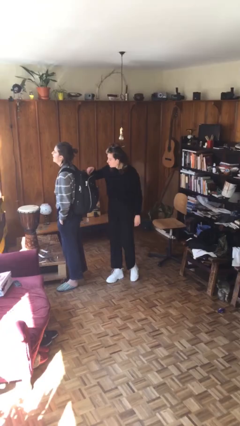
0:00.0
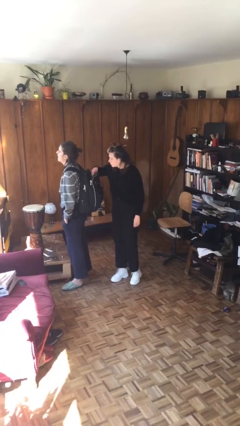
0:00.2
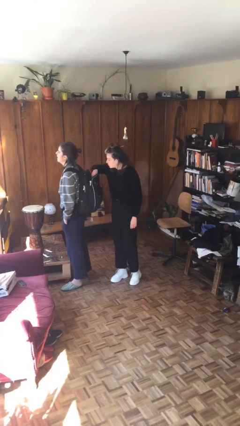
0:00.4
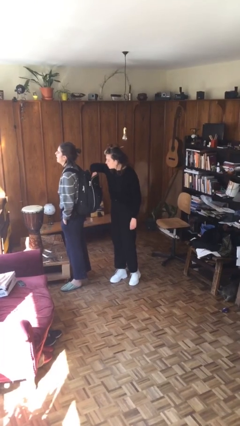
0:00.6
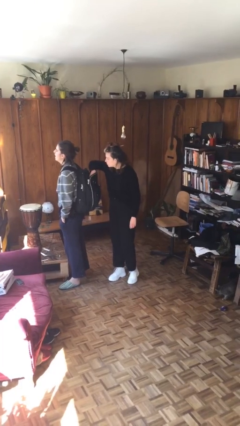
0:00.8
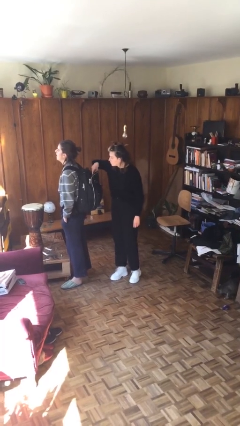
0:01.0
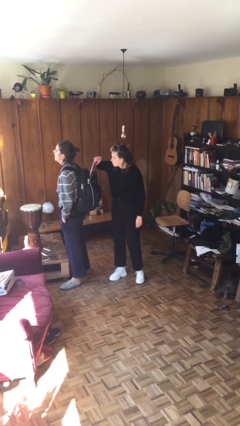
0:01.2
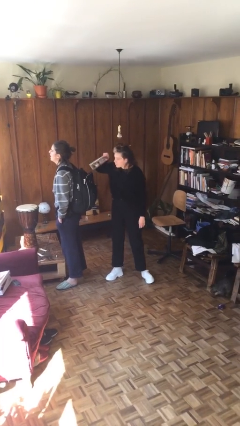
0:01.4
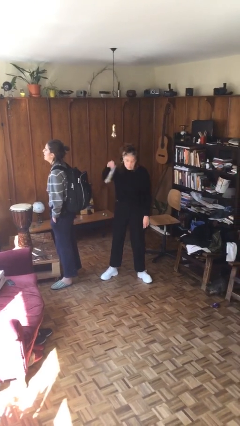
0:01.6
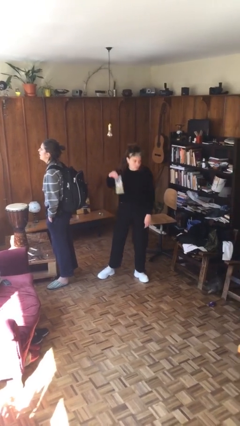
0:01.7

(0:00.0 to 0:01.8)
person steals object from person

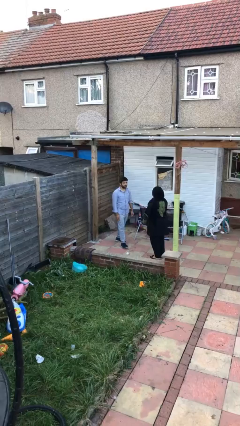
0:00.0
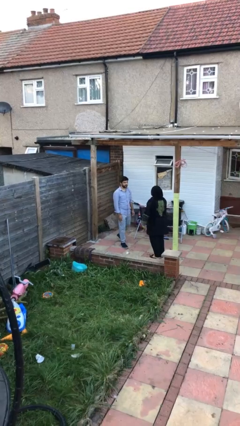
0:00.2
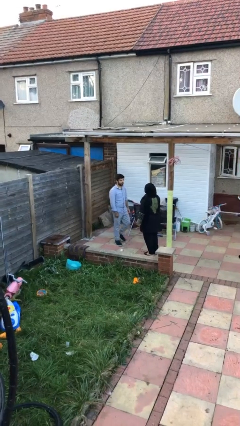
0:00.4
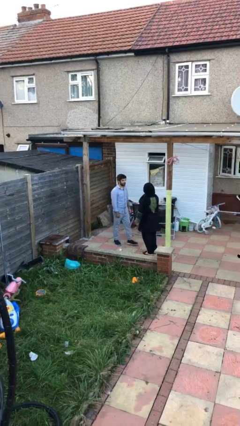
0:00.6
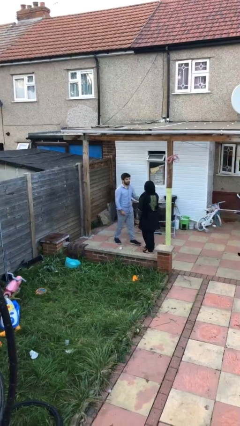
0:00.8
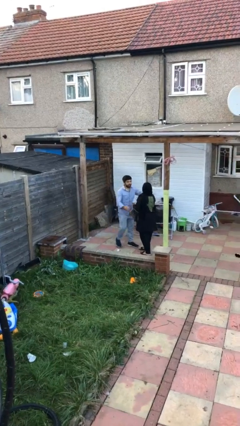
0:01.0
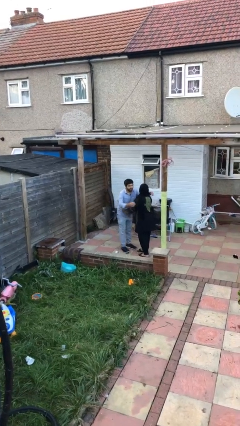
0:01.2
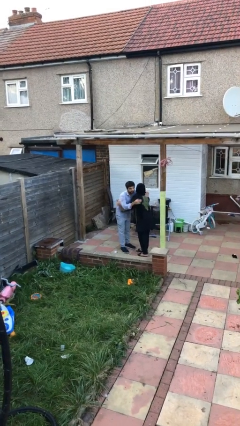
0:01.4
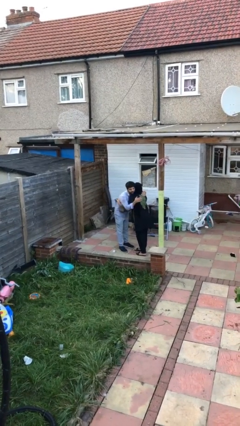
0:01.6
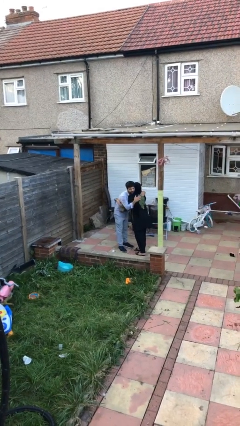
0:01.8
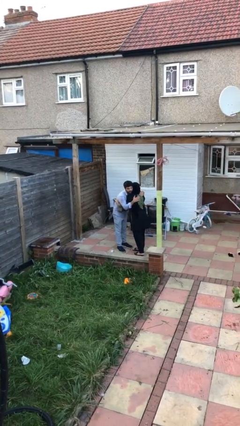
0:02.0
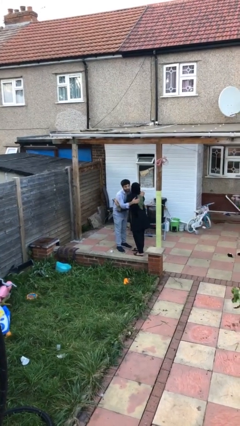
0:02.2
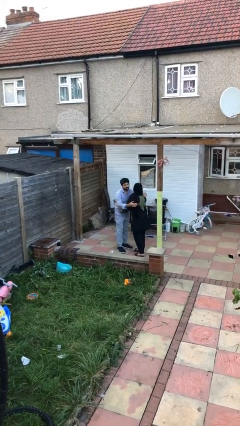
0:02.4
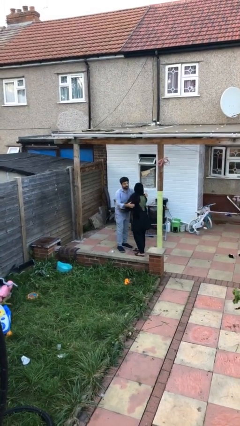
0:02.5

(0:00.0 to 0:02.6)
person embraces person

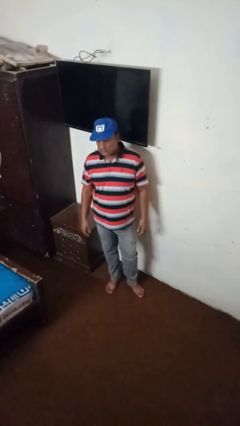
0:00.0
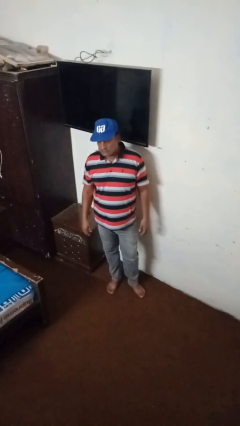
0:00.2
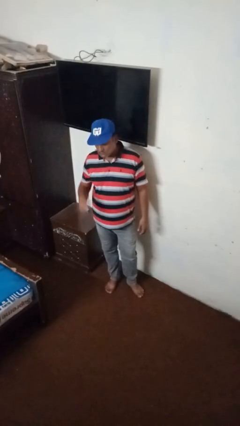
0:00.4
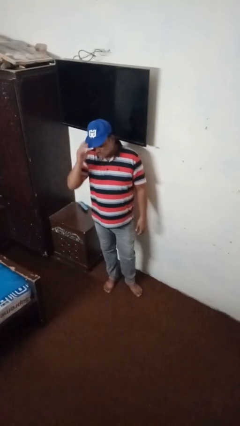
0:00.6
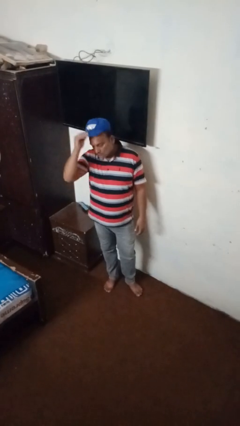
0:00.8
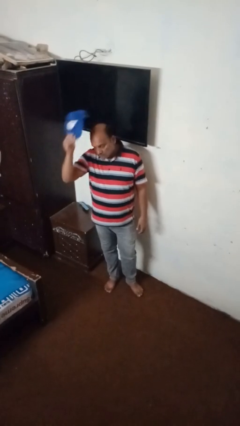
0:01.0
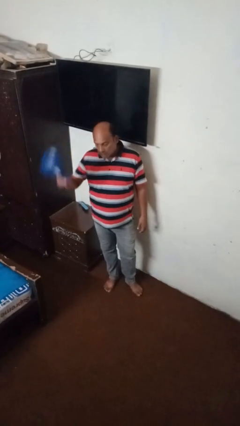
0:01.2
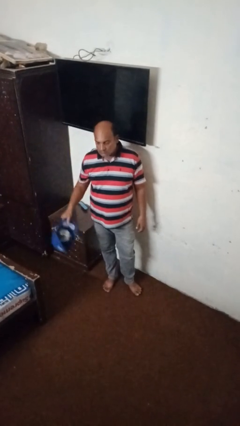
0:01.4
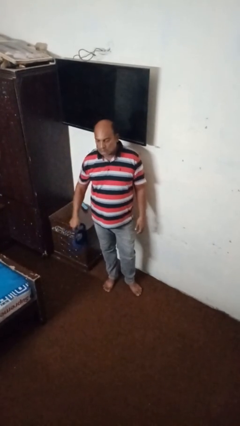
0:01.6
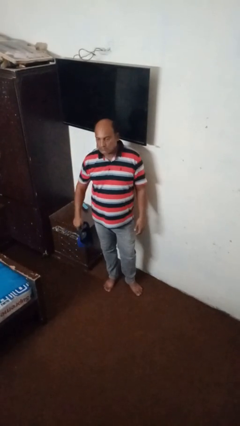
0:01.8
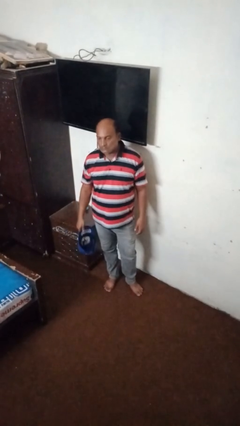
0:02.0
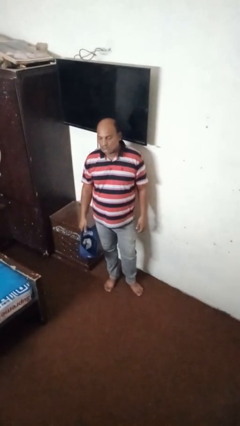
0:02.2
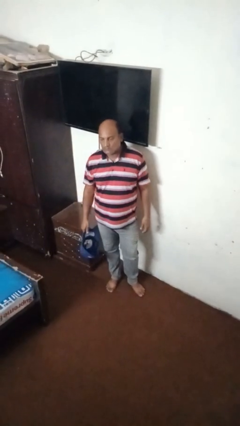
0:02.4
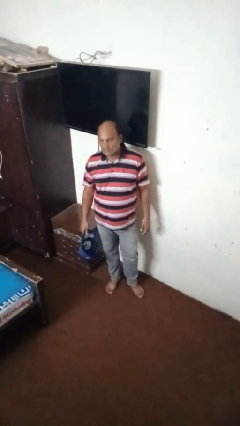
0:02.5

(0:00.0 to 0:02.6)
person takes off hat

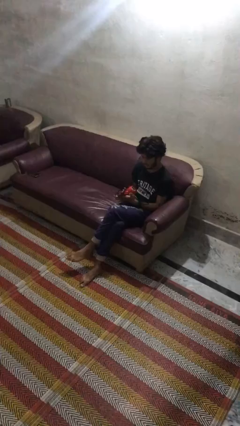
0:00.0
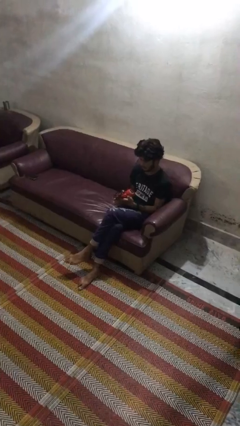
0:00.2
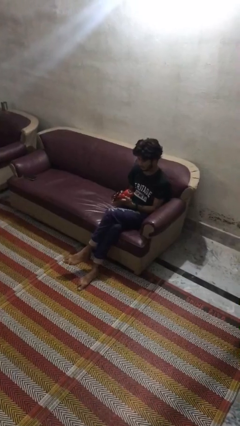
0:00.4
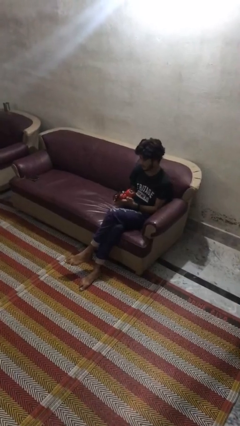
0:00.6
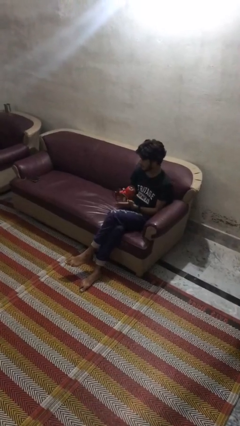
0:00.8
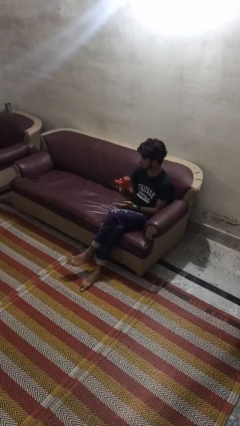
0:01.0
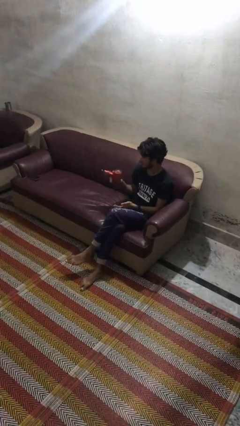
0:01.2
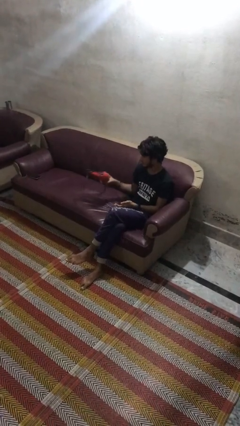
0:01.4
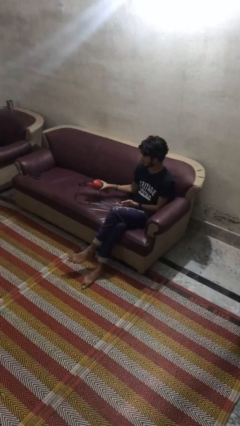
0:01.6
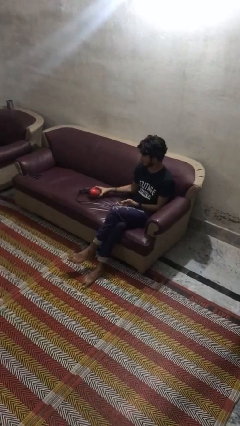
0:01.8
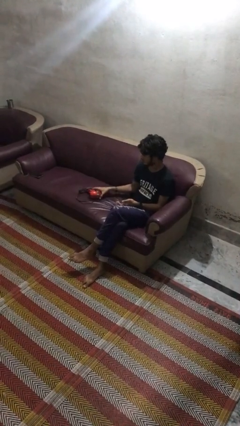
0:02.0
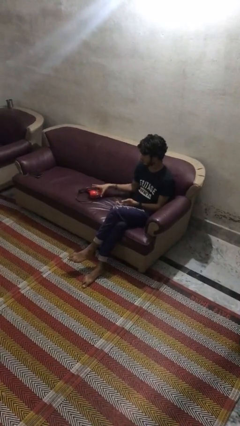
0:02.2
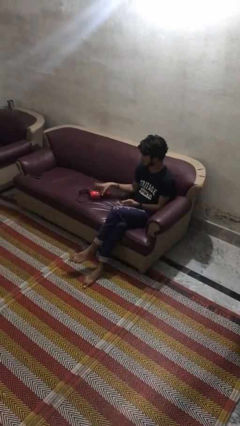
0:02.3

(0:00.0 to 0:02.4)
person puts down object on couch

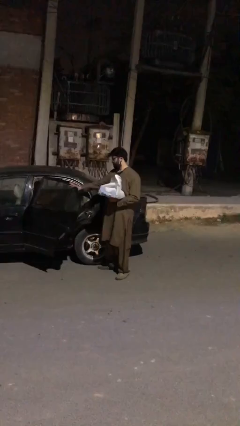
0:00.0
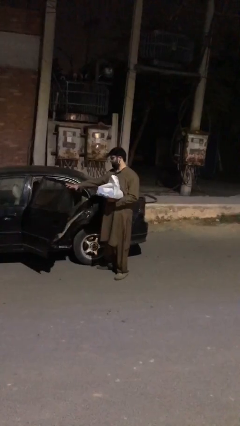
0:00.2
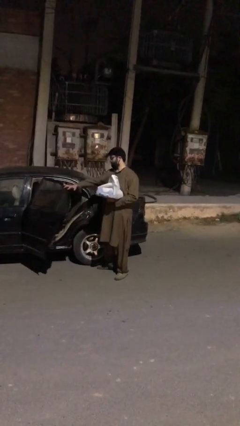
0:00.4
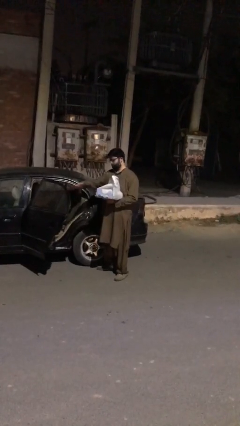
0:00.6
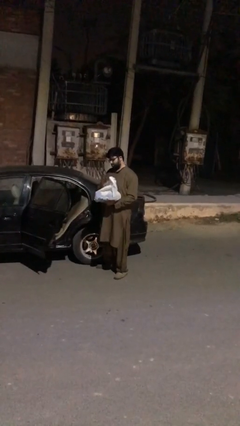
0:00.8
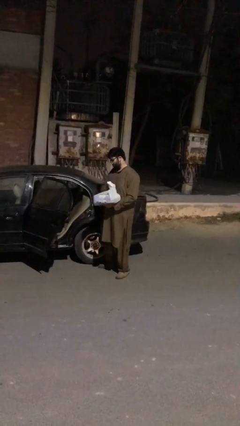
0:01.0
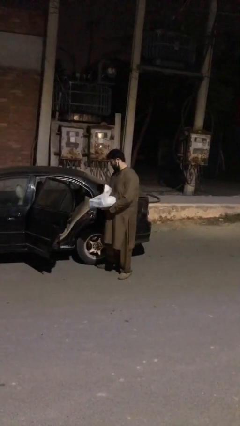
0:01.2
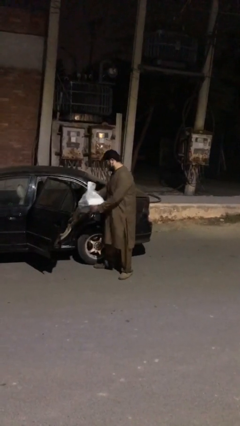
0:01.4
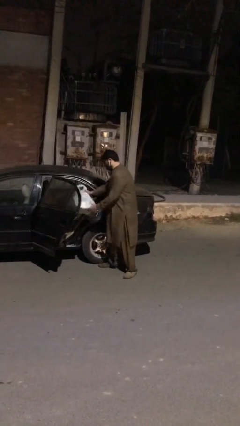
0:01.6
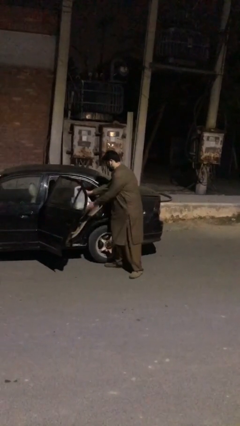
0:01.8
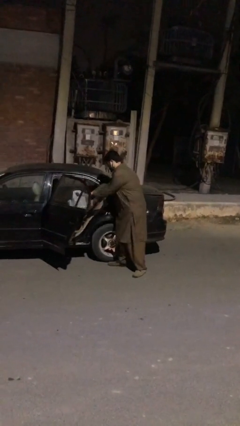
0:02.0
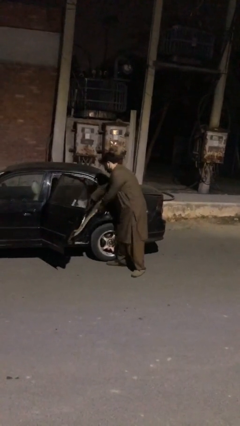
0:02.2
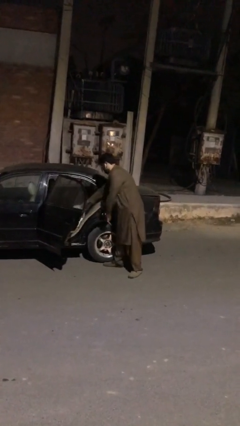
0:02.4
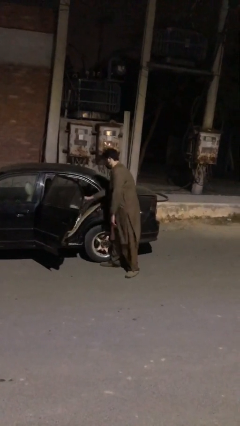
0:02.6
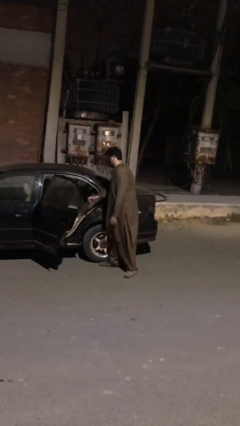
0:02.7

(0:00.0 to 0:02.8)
person loads car

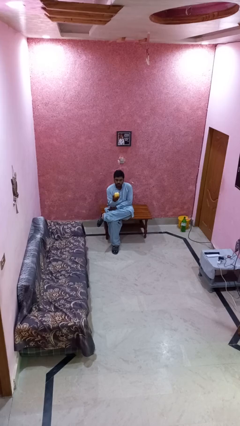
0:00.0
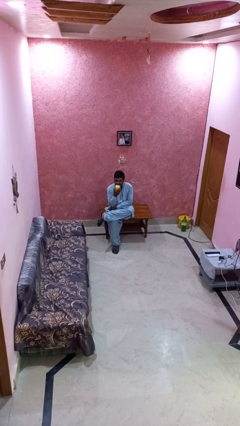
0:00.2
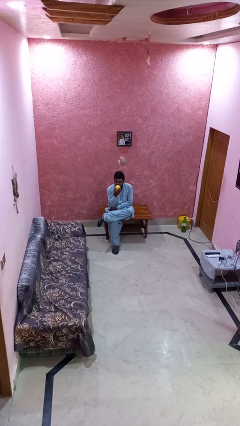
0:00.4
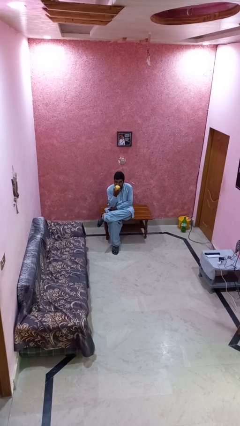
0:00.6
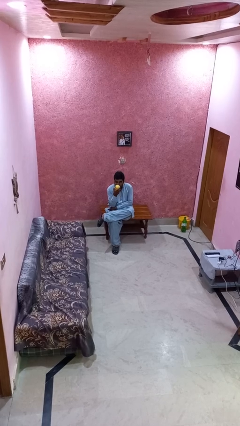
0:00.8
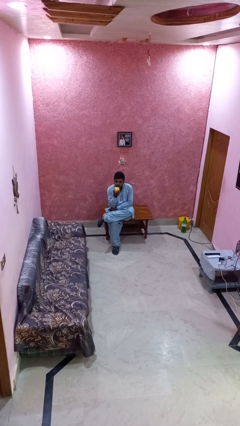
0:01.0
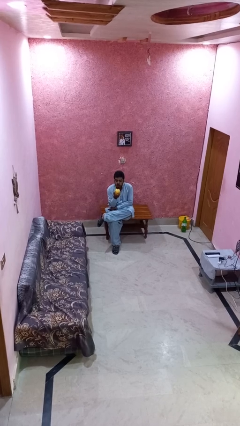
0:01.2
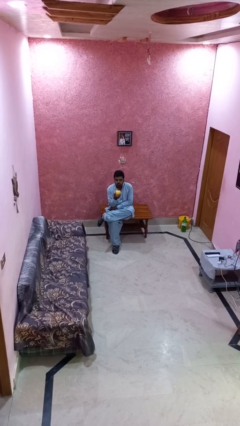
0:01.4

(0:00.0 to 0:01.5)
person eats apple

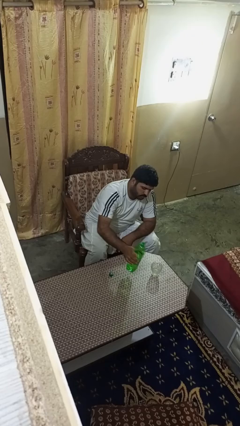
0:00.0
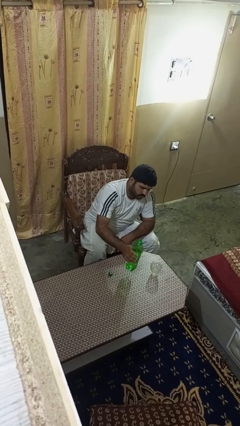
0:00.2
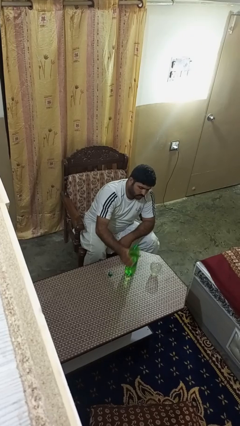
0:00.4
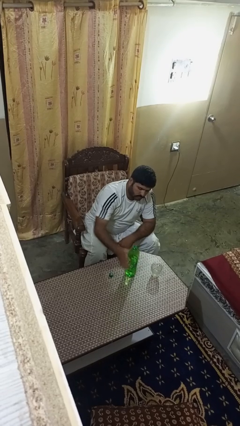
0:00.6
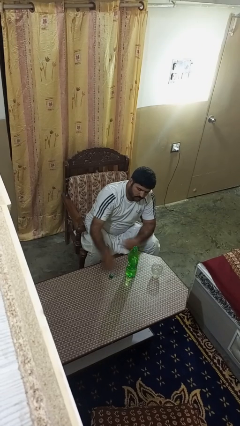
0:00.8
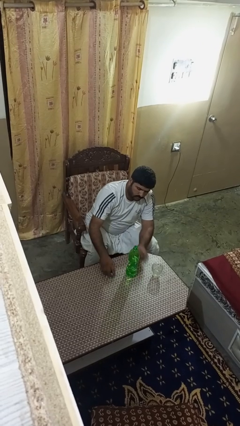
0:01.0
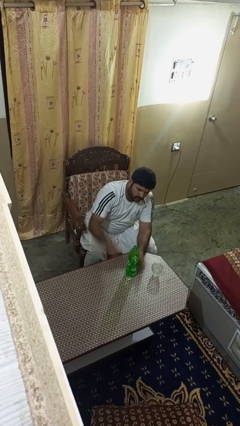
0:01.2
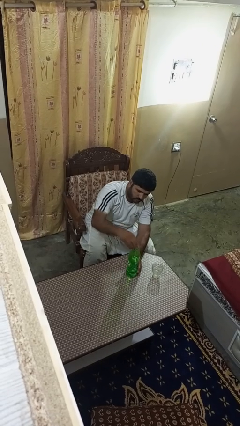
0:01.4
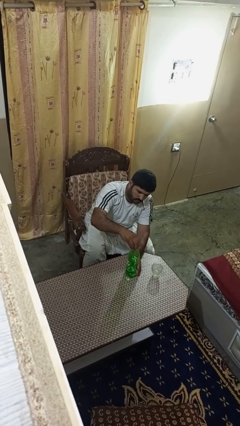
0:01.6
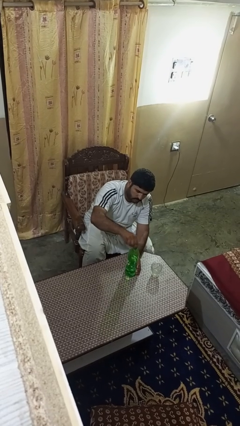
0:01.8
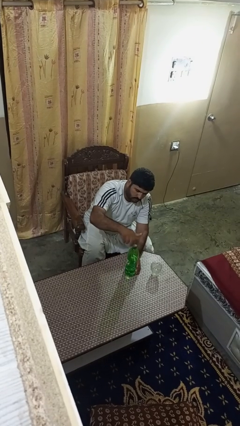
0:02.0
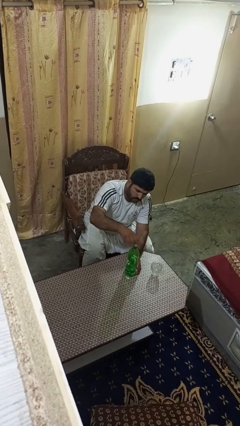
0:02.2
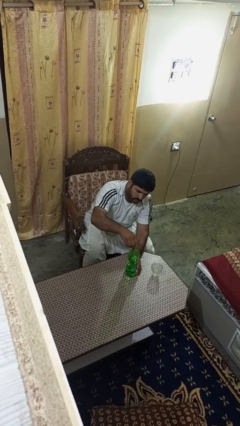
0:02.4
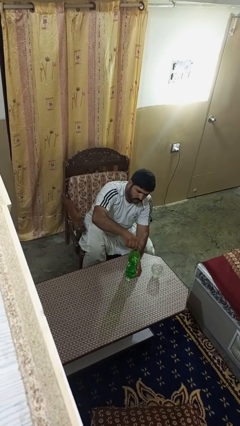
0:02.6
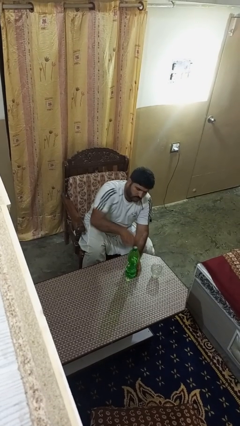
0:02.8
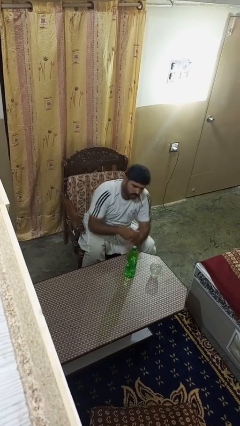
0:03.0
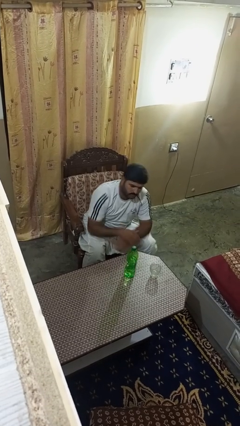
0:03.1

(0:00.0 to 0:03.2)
person screws lid to bottle

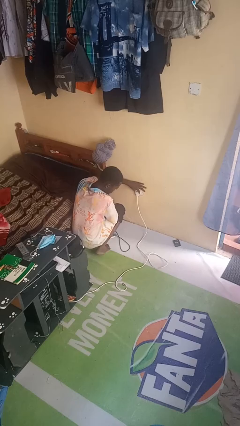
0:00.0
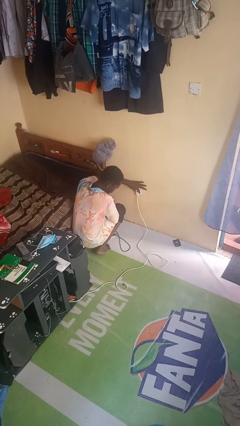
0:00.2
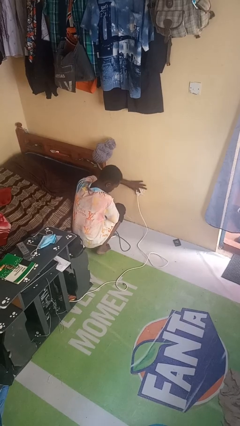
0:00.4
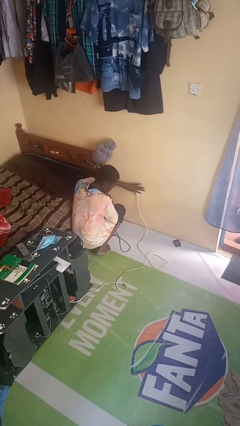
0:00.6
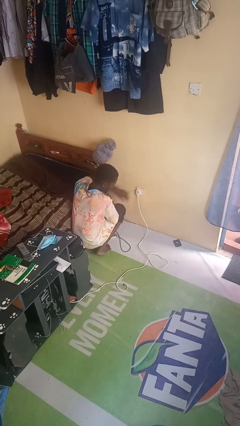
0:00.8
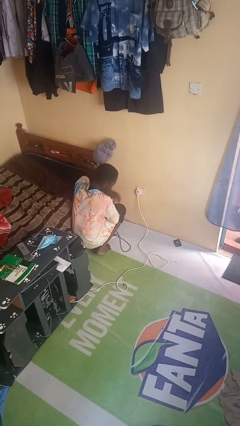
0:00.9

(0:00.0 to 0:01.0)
person plugs into electrical socket
